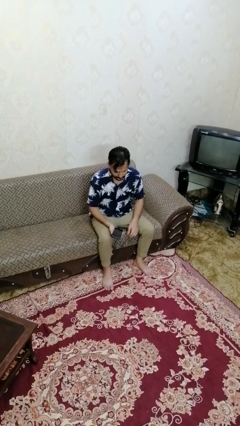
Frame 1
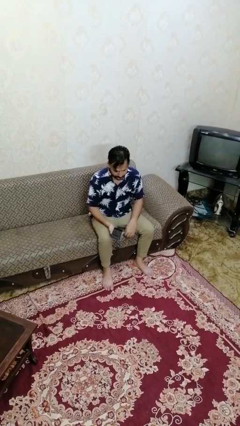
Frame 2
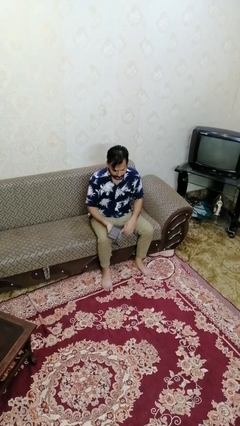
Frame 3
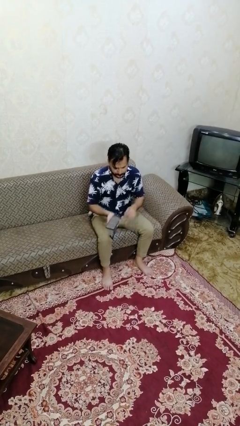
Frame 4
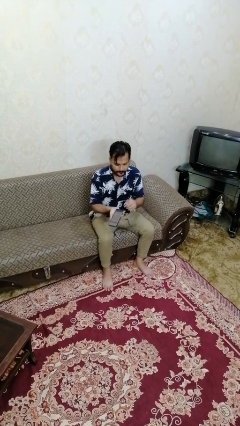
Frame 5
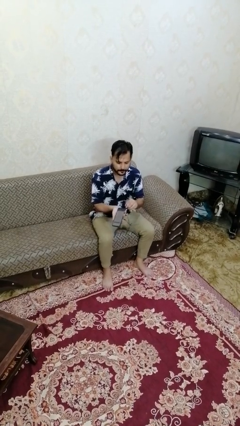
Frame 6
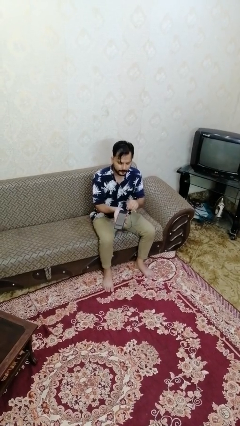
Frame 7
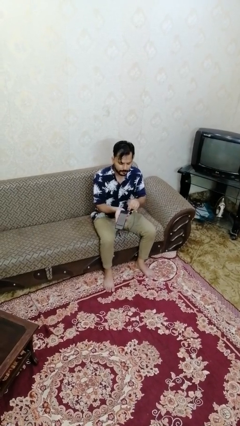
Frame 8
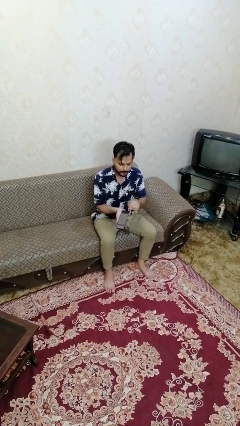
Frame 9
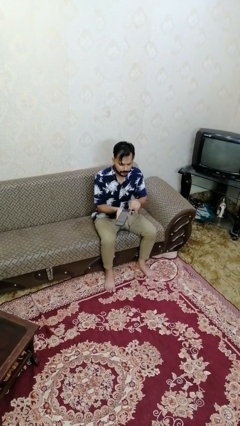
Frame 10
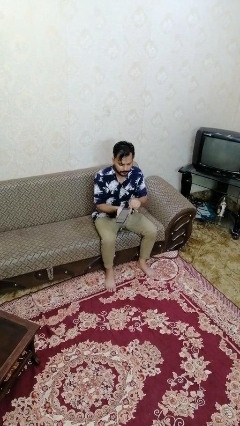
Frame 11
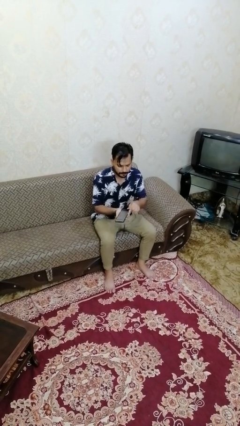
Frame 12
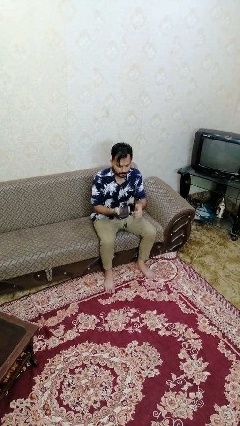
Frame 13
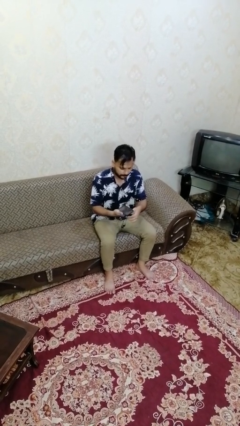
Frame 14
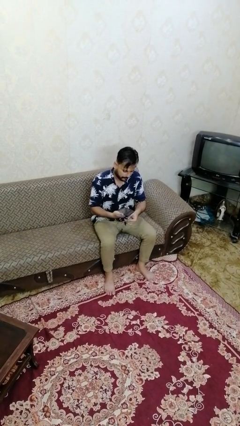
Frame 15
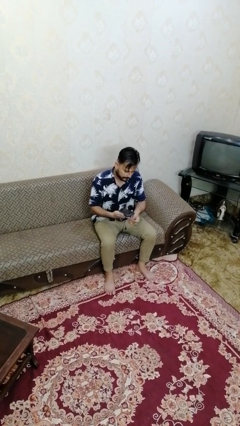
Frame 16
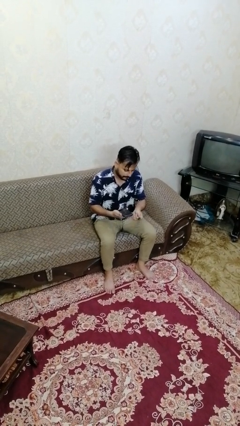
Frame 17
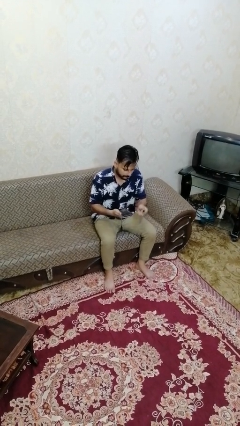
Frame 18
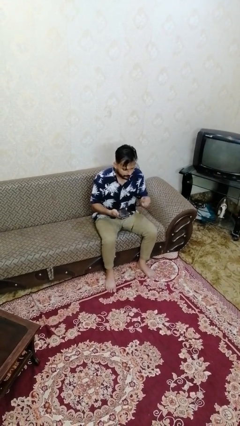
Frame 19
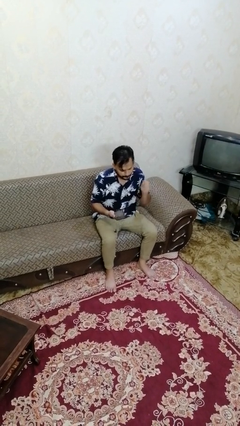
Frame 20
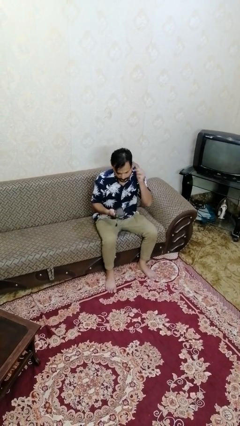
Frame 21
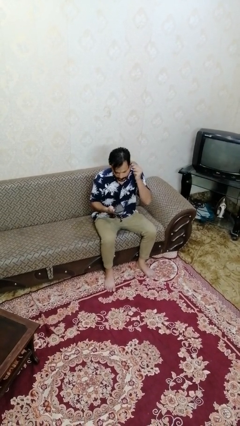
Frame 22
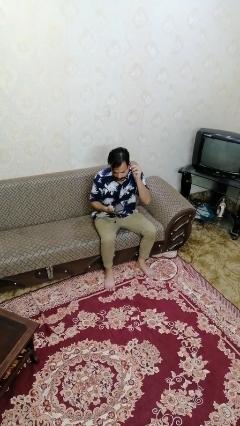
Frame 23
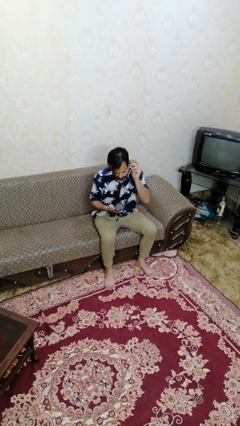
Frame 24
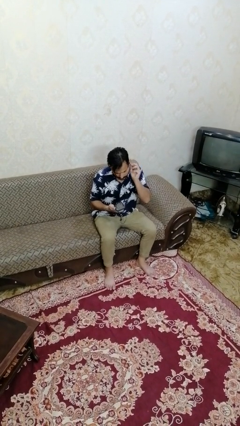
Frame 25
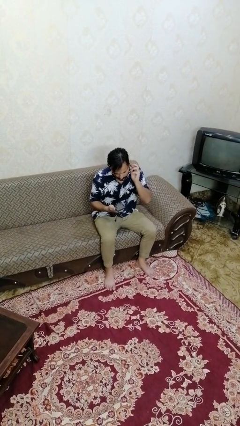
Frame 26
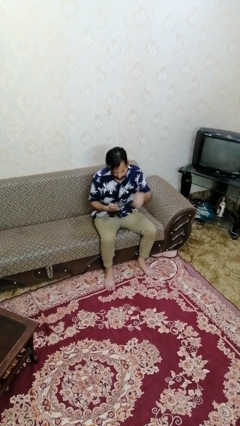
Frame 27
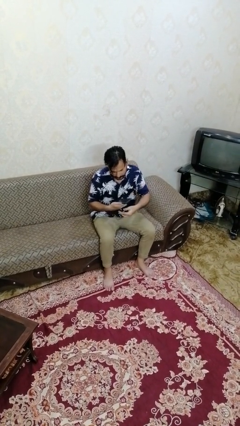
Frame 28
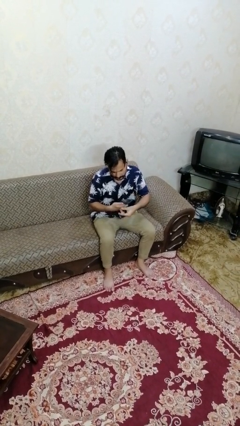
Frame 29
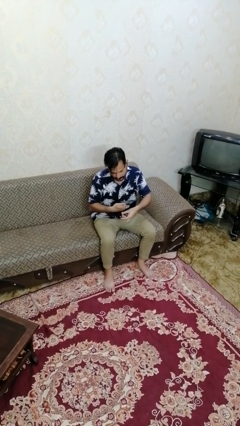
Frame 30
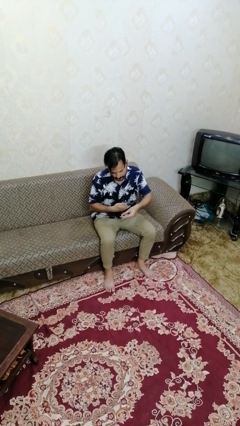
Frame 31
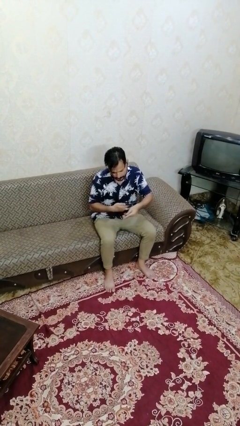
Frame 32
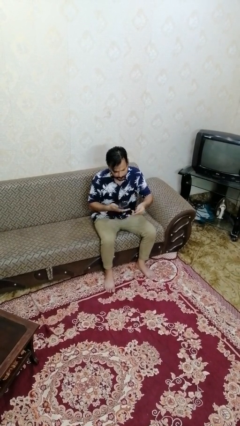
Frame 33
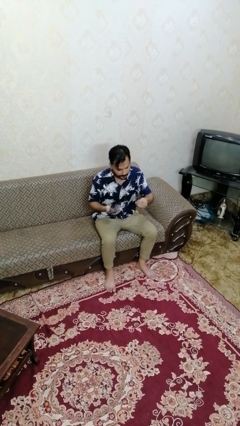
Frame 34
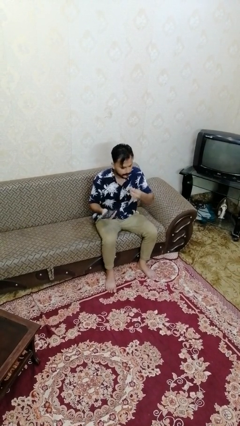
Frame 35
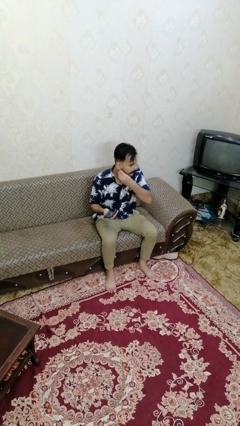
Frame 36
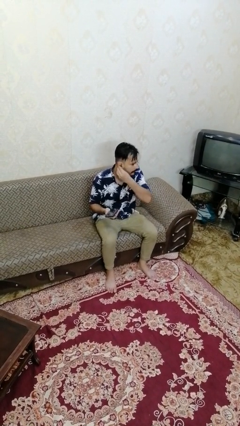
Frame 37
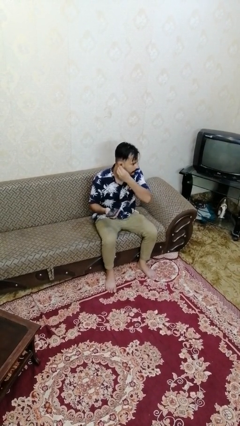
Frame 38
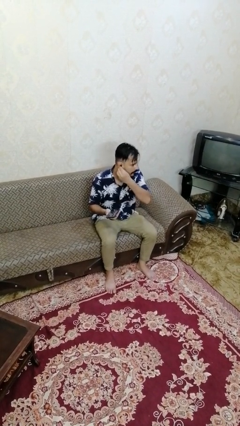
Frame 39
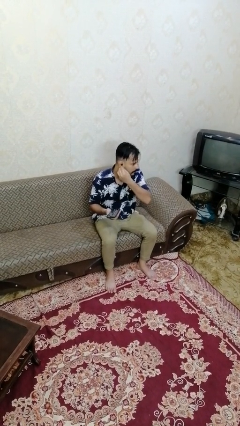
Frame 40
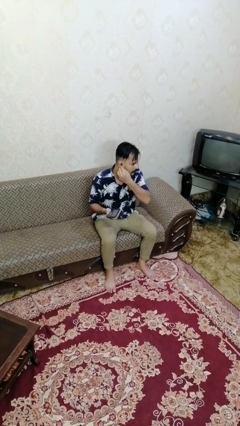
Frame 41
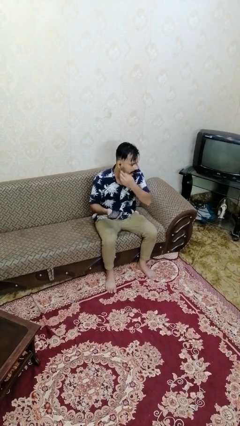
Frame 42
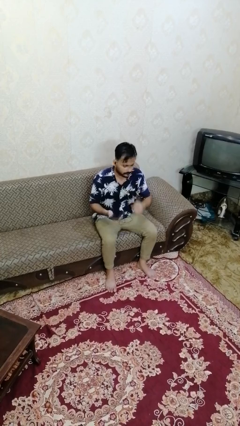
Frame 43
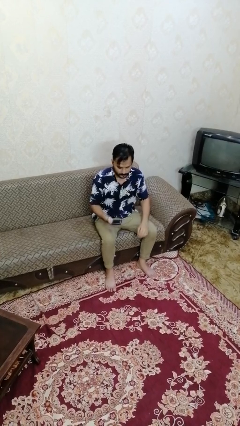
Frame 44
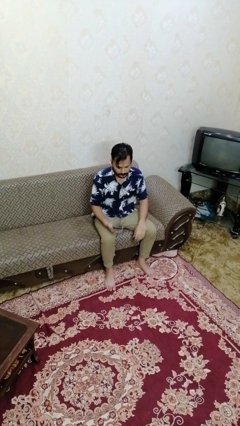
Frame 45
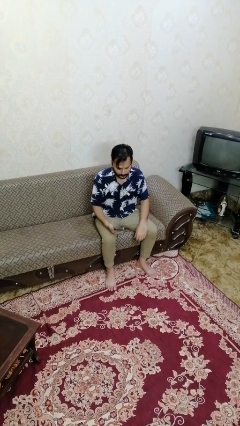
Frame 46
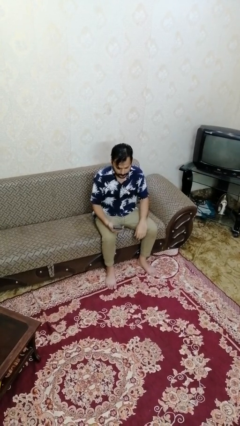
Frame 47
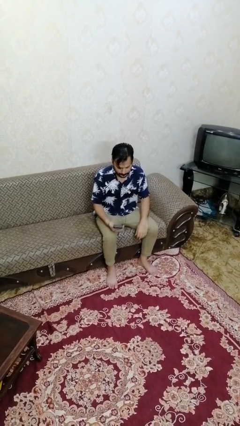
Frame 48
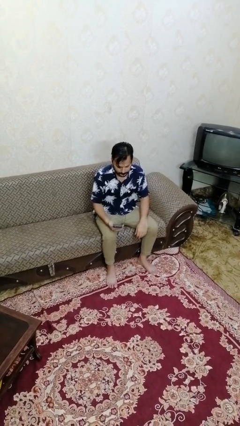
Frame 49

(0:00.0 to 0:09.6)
person puts on headphones

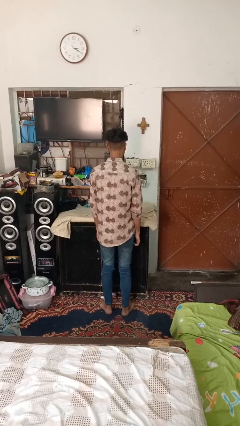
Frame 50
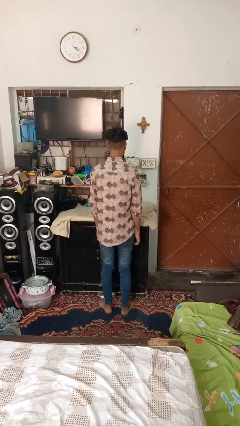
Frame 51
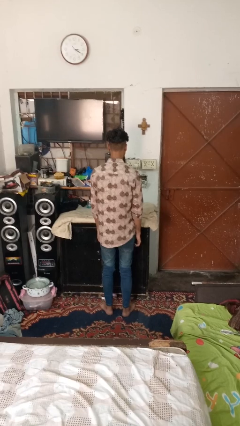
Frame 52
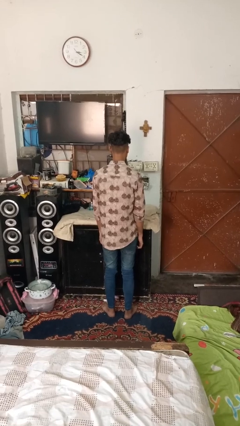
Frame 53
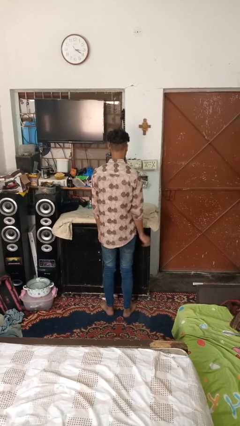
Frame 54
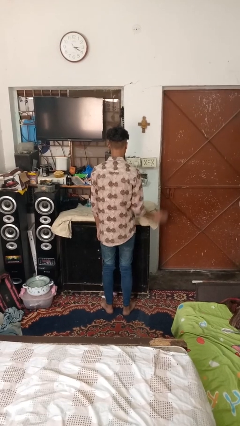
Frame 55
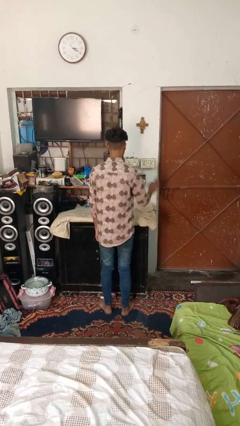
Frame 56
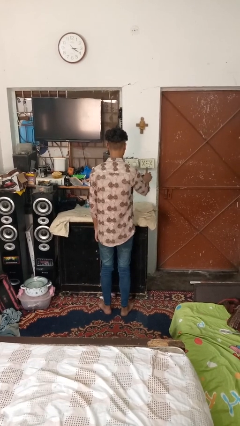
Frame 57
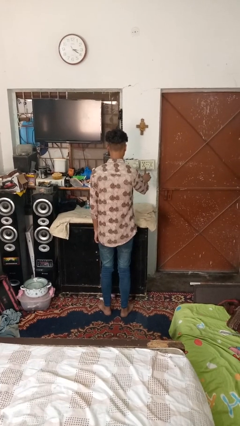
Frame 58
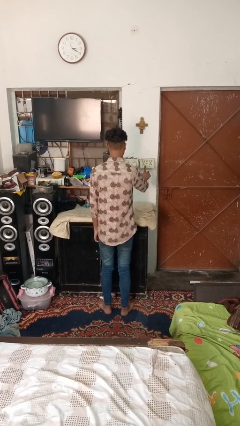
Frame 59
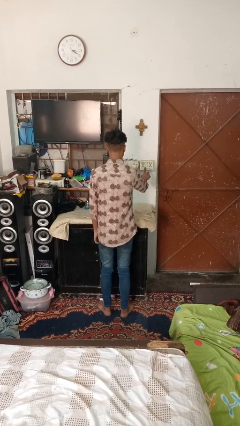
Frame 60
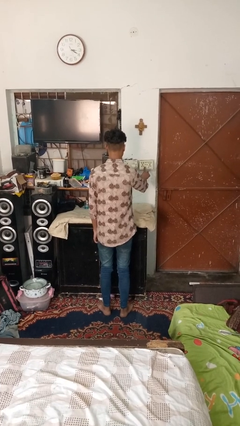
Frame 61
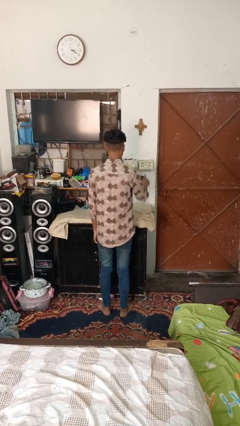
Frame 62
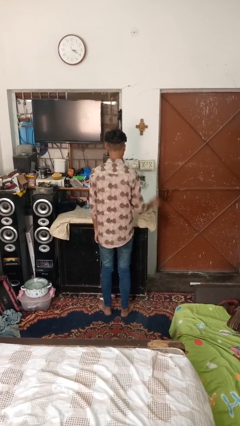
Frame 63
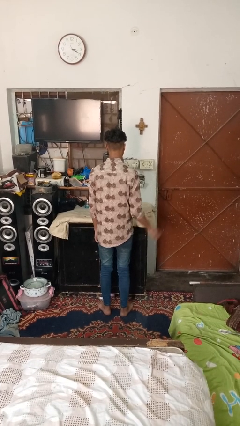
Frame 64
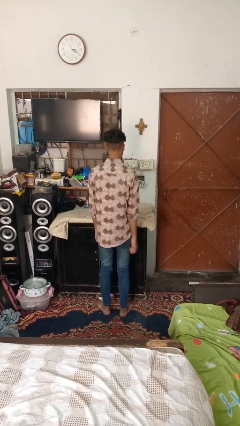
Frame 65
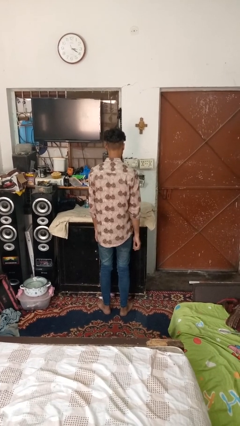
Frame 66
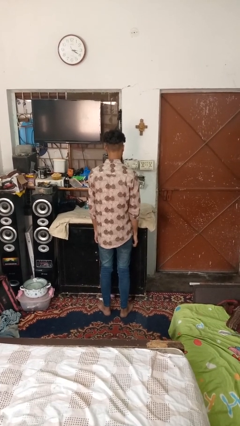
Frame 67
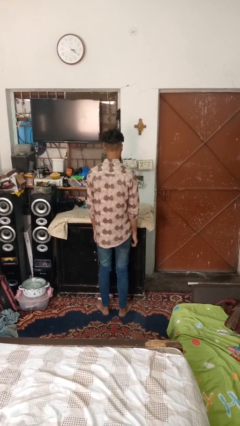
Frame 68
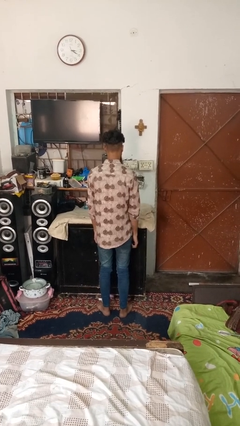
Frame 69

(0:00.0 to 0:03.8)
person turns off fan

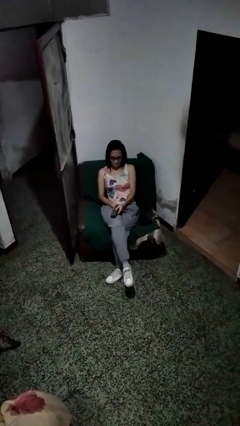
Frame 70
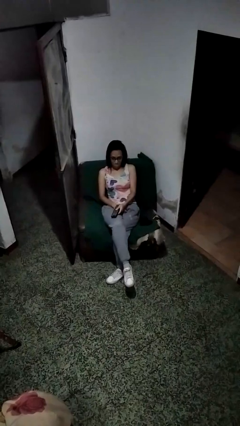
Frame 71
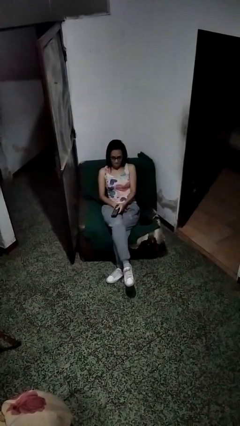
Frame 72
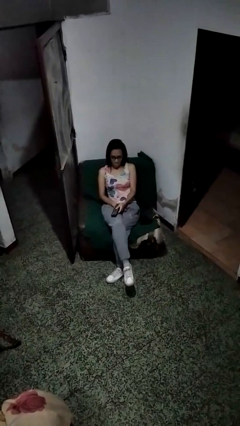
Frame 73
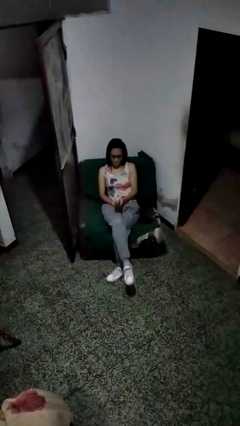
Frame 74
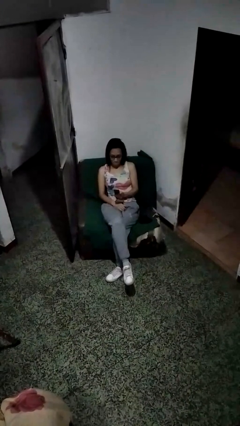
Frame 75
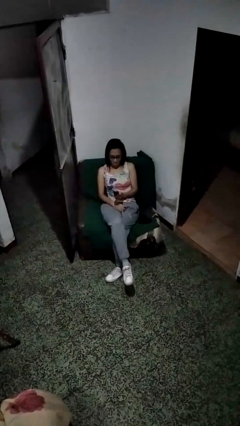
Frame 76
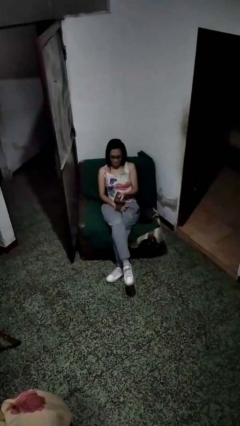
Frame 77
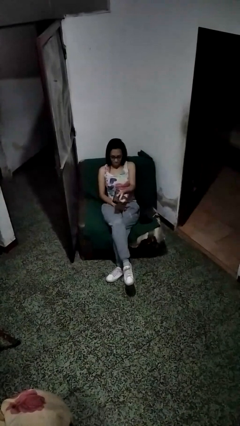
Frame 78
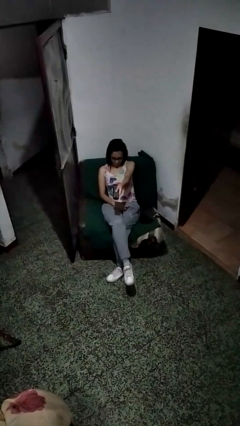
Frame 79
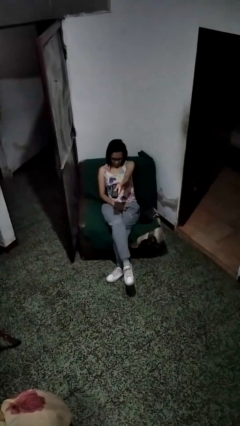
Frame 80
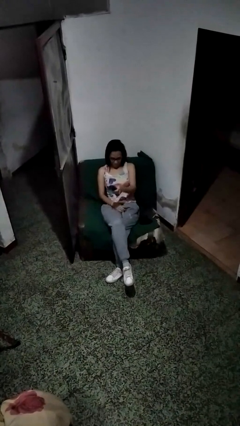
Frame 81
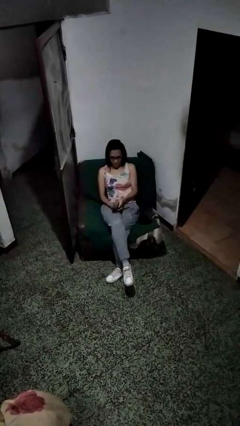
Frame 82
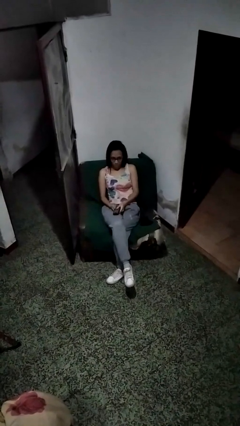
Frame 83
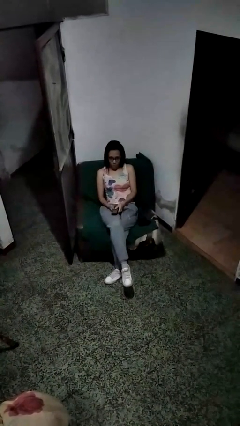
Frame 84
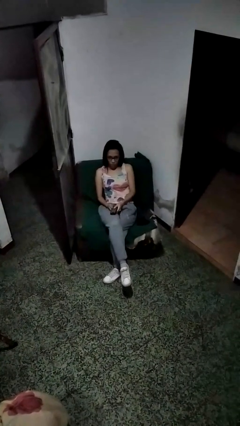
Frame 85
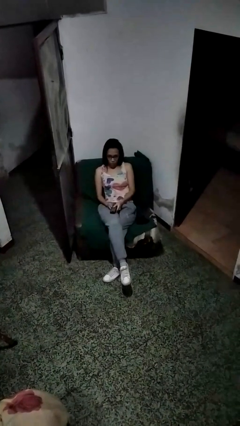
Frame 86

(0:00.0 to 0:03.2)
person uses television remote

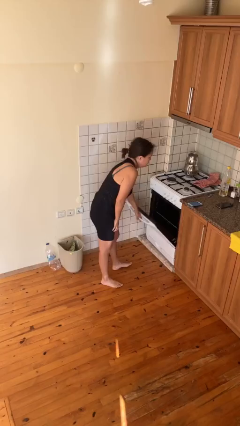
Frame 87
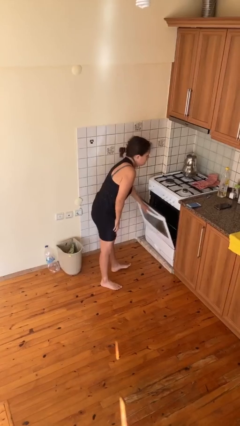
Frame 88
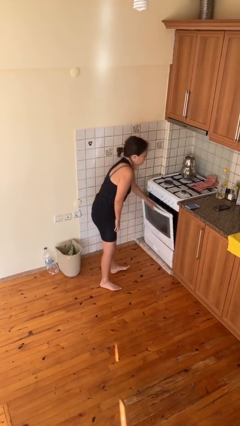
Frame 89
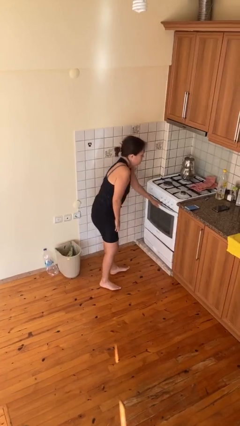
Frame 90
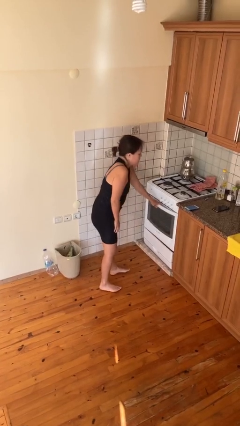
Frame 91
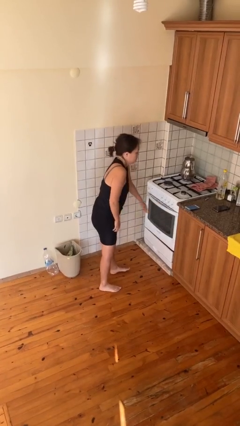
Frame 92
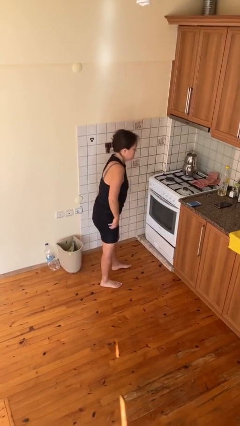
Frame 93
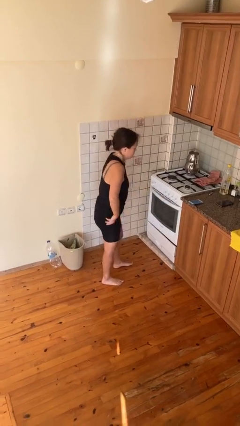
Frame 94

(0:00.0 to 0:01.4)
person closes oven door
